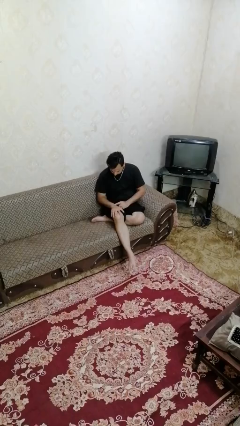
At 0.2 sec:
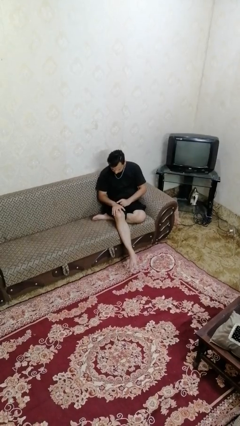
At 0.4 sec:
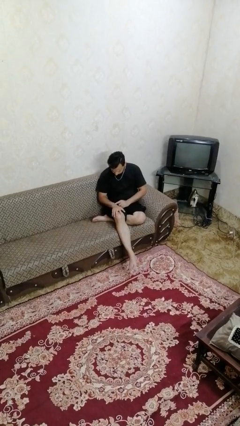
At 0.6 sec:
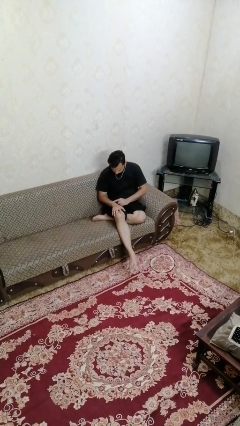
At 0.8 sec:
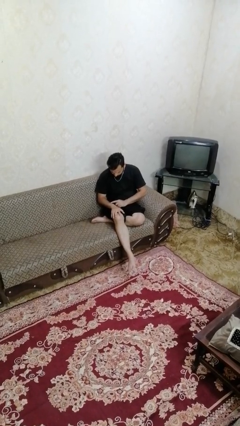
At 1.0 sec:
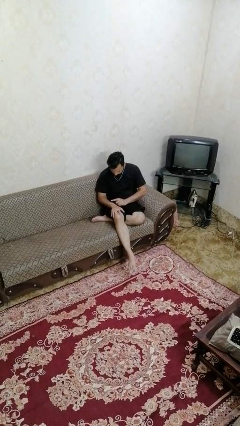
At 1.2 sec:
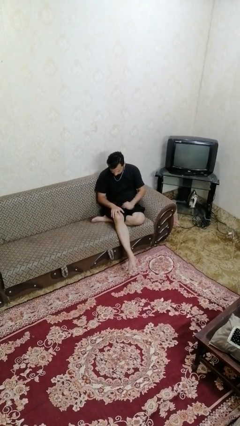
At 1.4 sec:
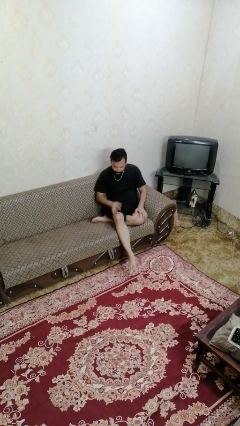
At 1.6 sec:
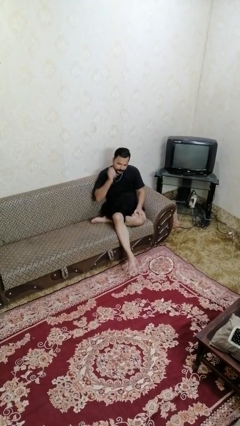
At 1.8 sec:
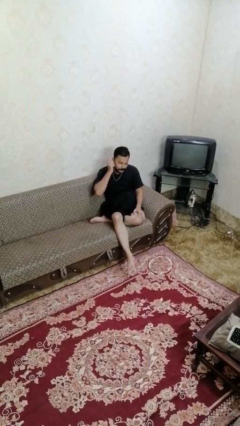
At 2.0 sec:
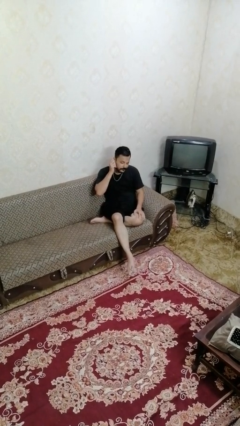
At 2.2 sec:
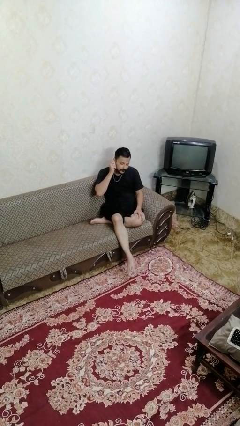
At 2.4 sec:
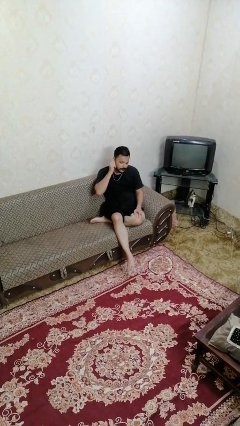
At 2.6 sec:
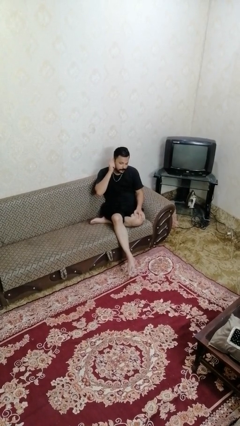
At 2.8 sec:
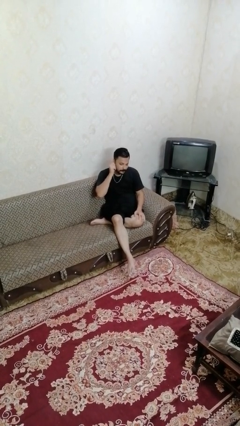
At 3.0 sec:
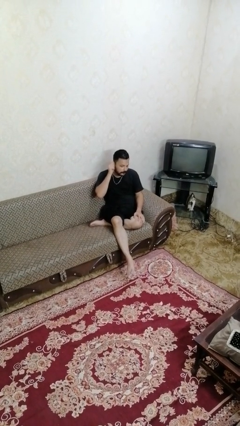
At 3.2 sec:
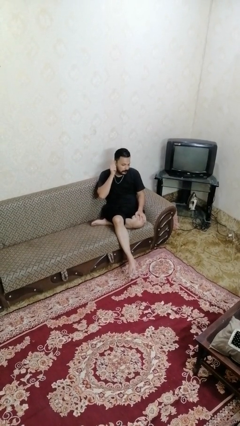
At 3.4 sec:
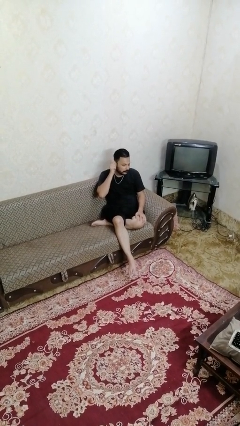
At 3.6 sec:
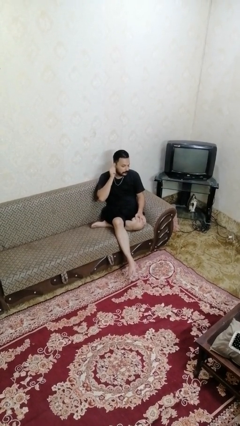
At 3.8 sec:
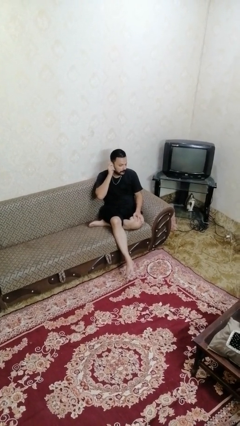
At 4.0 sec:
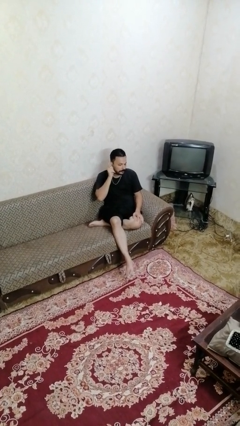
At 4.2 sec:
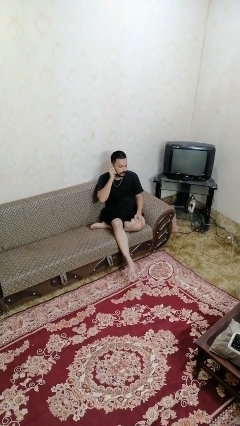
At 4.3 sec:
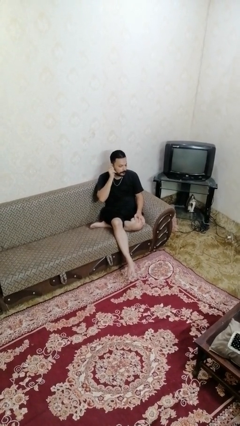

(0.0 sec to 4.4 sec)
person touches earlobe

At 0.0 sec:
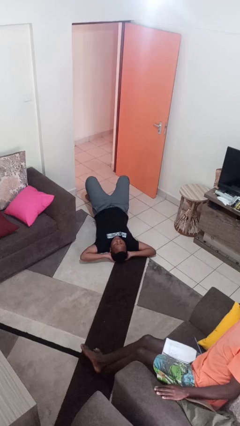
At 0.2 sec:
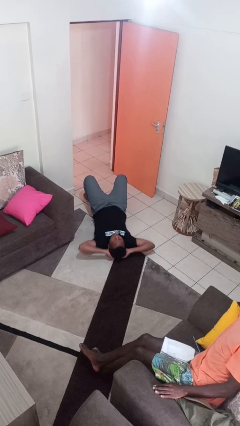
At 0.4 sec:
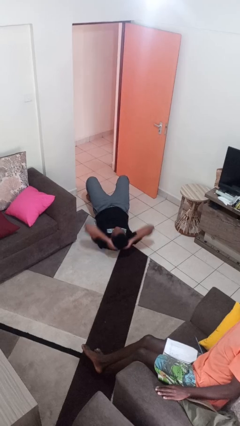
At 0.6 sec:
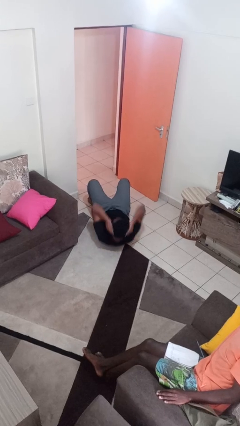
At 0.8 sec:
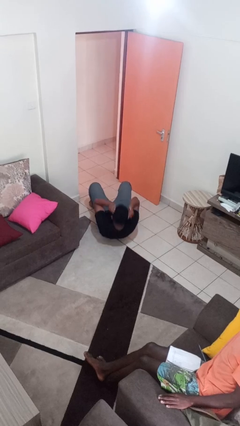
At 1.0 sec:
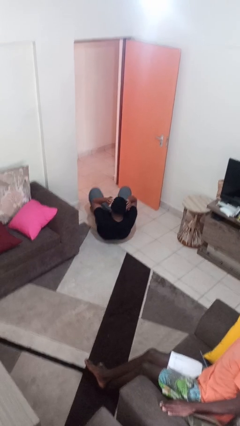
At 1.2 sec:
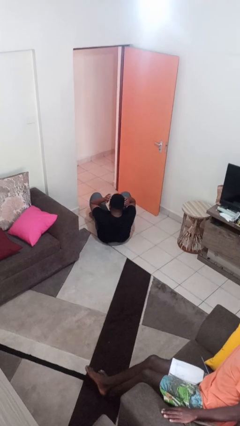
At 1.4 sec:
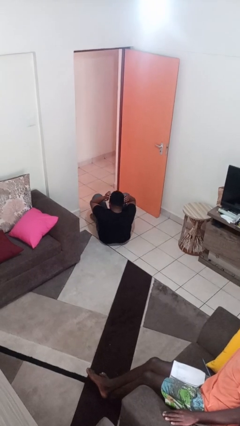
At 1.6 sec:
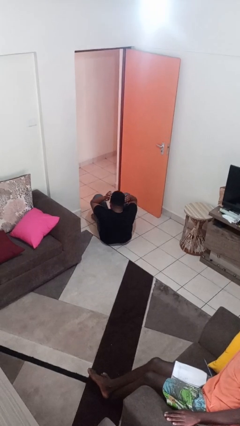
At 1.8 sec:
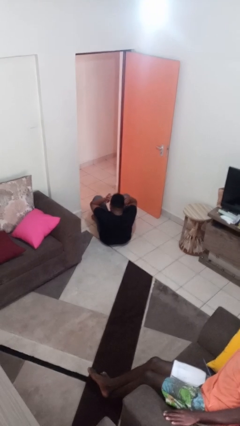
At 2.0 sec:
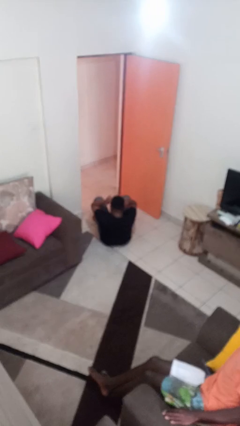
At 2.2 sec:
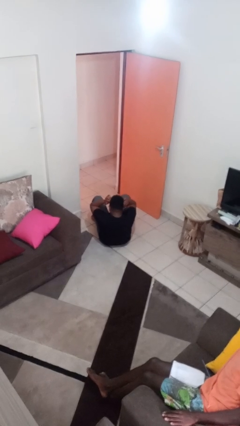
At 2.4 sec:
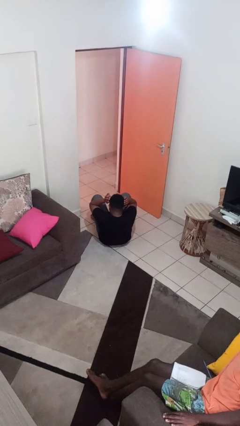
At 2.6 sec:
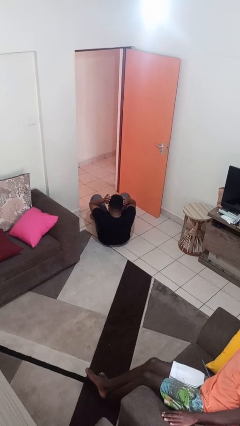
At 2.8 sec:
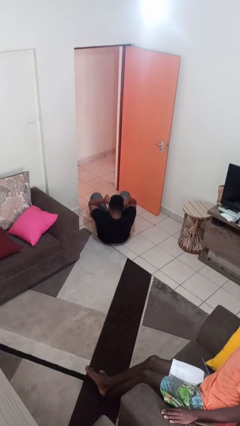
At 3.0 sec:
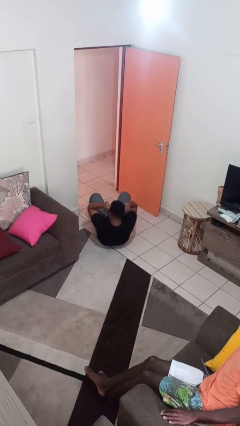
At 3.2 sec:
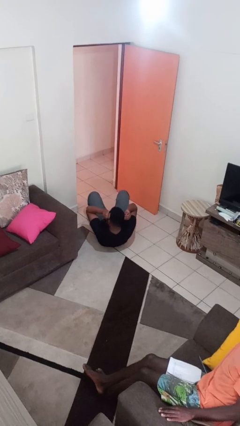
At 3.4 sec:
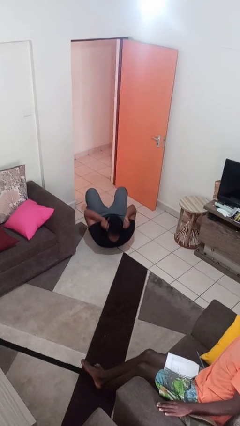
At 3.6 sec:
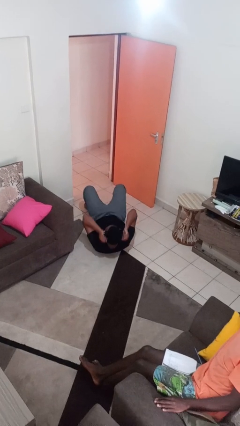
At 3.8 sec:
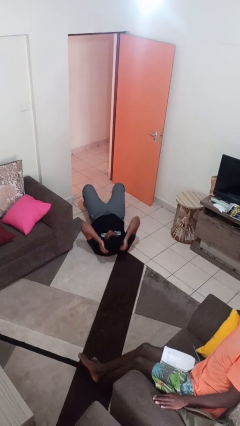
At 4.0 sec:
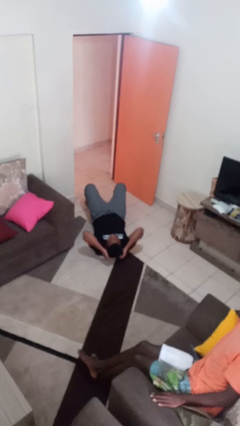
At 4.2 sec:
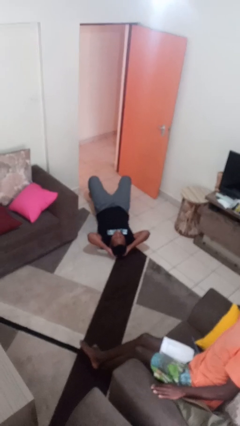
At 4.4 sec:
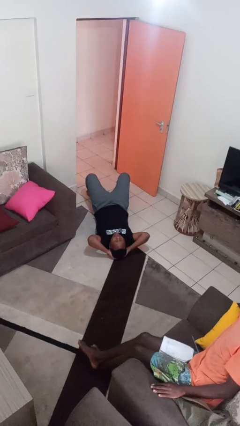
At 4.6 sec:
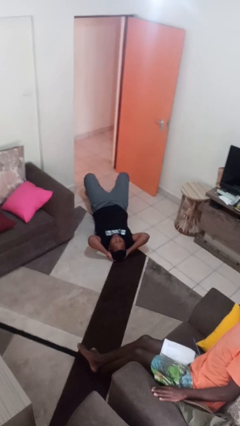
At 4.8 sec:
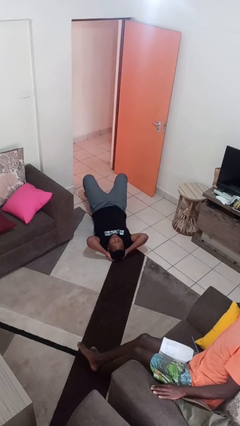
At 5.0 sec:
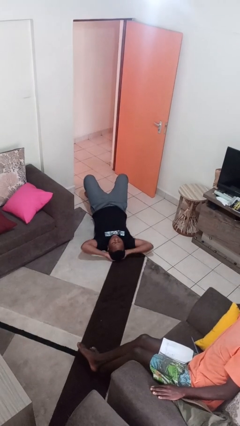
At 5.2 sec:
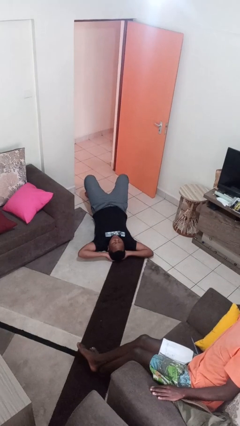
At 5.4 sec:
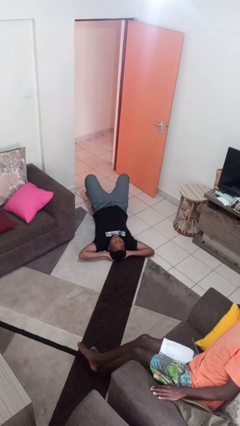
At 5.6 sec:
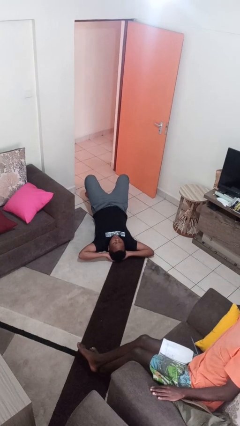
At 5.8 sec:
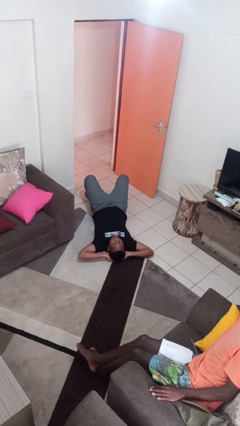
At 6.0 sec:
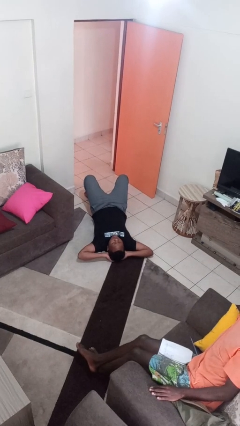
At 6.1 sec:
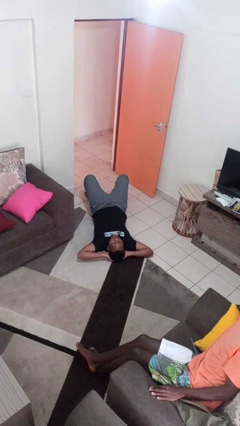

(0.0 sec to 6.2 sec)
person exercises with situp

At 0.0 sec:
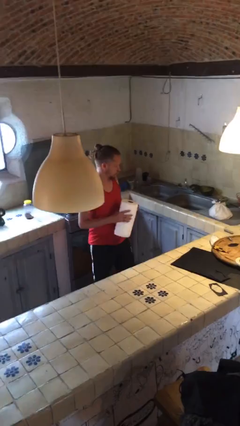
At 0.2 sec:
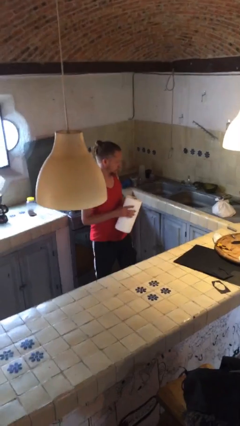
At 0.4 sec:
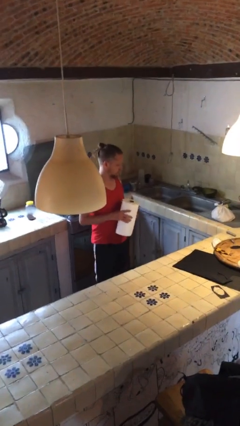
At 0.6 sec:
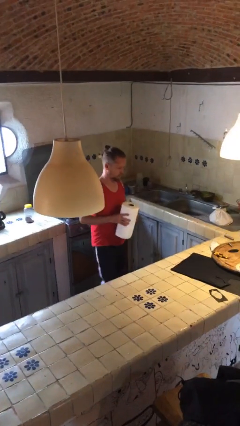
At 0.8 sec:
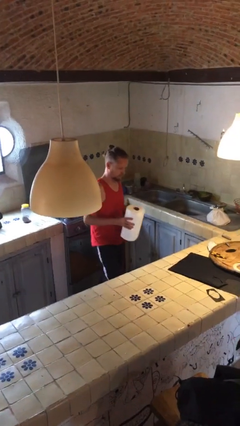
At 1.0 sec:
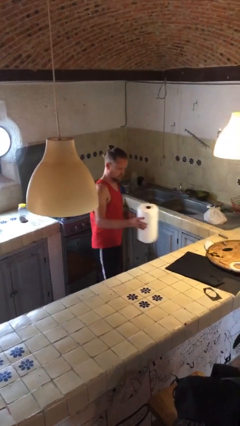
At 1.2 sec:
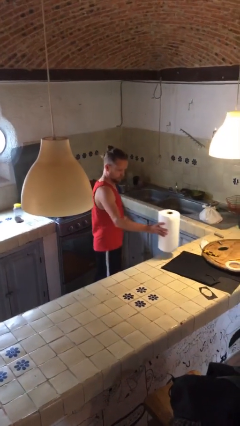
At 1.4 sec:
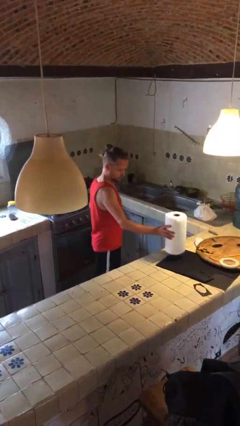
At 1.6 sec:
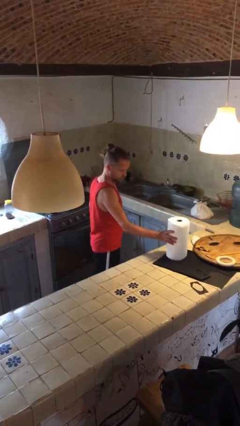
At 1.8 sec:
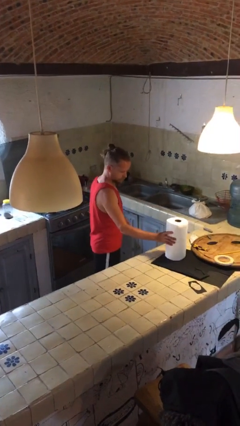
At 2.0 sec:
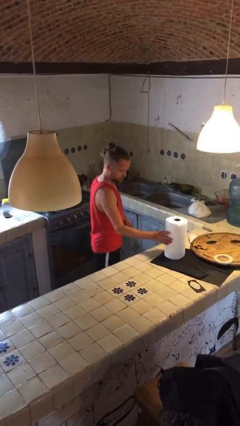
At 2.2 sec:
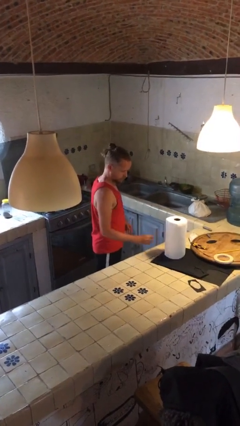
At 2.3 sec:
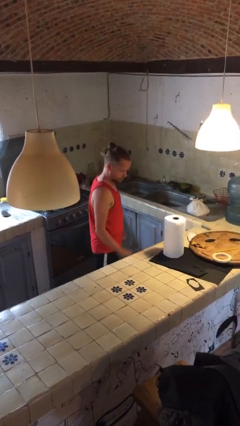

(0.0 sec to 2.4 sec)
person puts down object on countertop

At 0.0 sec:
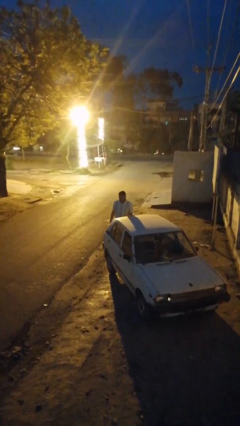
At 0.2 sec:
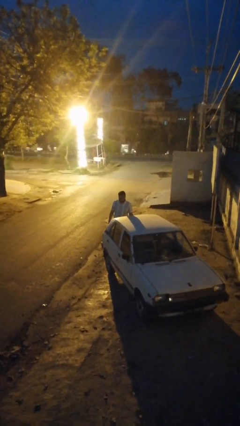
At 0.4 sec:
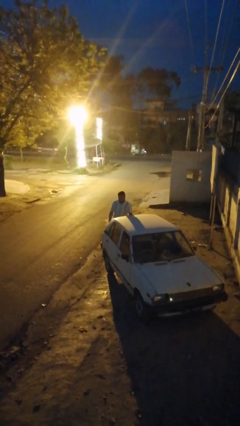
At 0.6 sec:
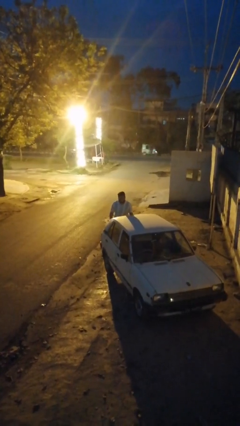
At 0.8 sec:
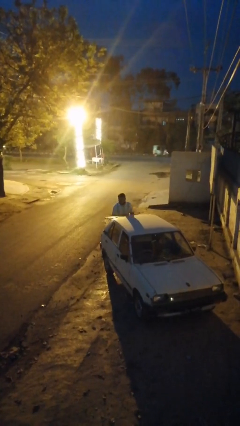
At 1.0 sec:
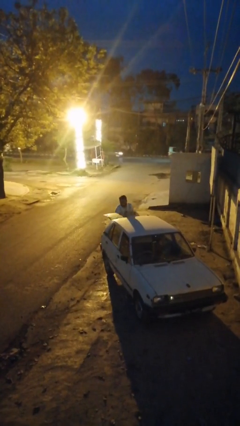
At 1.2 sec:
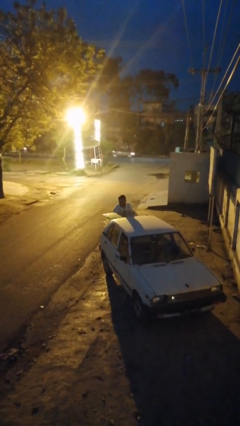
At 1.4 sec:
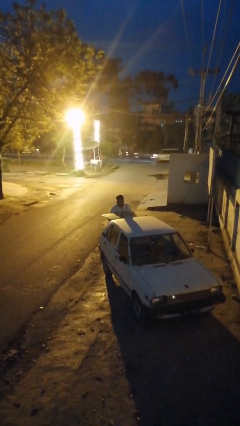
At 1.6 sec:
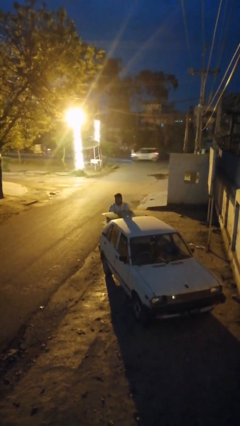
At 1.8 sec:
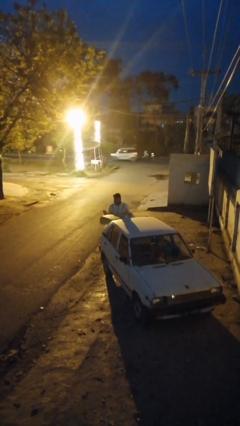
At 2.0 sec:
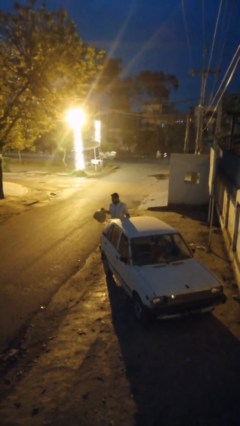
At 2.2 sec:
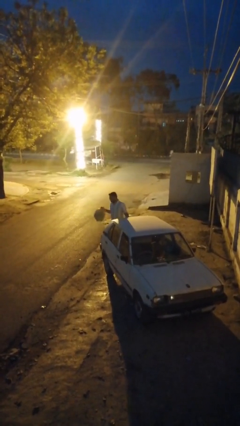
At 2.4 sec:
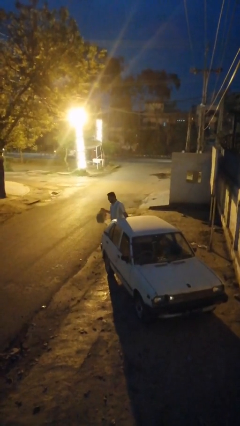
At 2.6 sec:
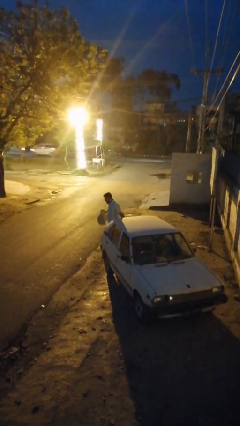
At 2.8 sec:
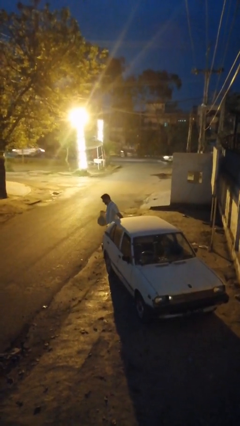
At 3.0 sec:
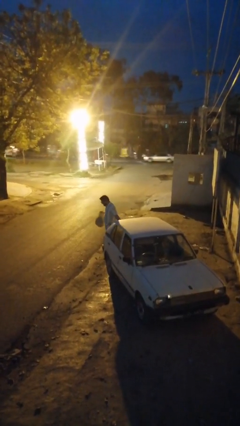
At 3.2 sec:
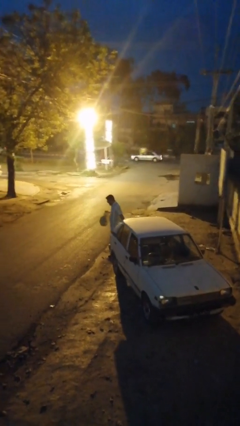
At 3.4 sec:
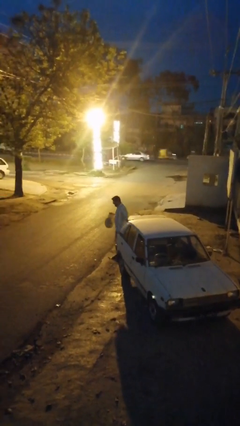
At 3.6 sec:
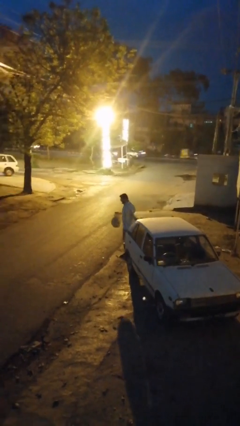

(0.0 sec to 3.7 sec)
person unloads car

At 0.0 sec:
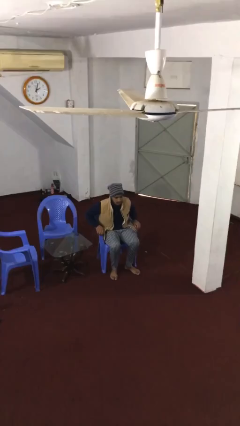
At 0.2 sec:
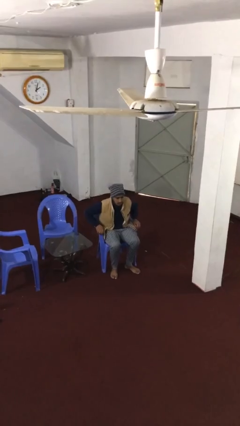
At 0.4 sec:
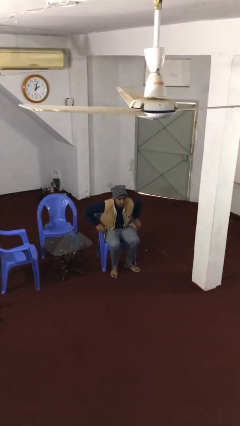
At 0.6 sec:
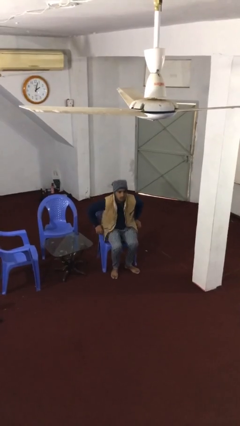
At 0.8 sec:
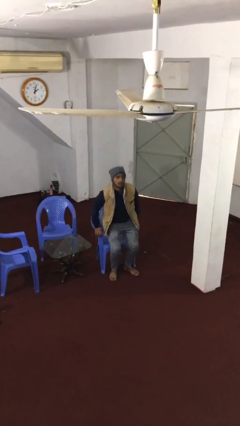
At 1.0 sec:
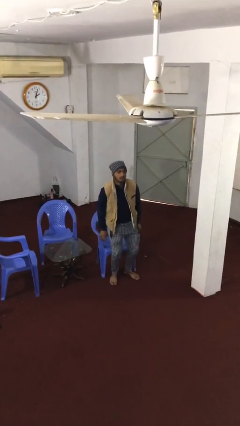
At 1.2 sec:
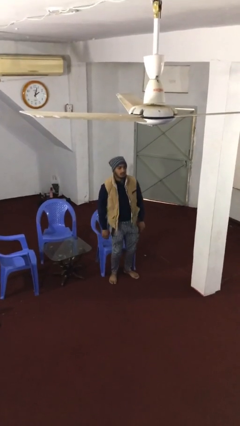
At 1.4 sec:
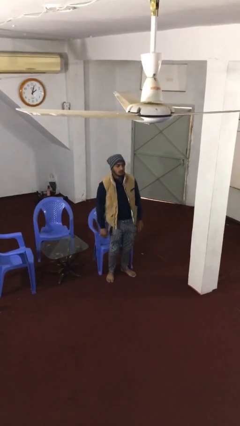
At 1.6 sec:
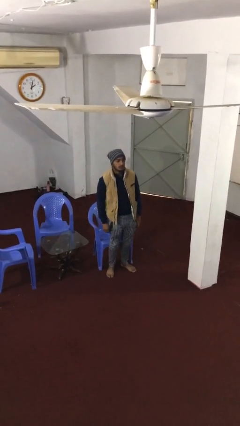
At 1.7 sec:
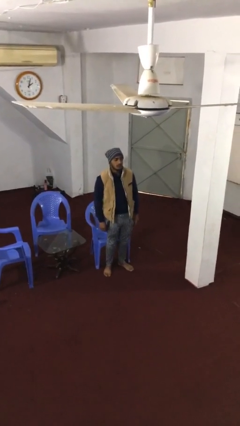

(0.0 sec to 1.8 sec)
person stands up
